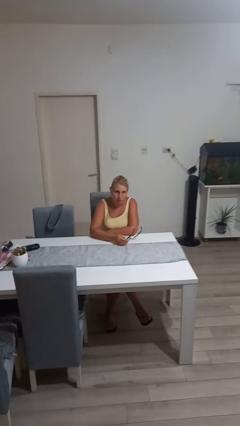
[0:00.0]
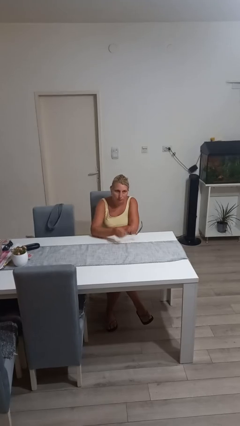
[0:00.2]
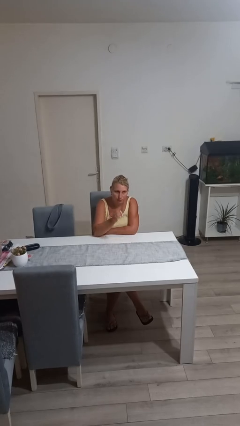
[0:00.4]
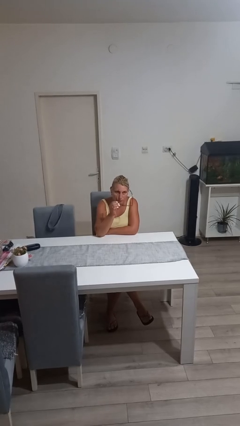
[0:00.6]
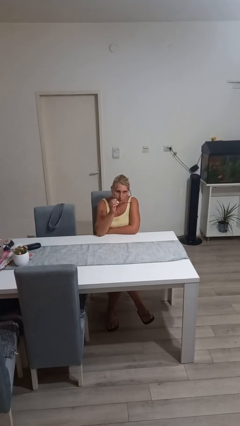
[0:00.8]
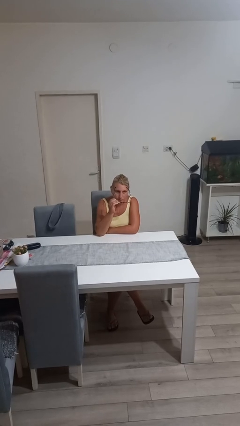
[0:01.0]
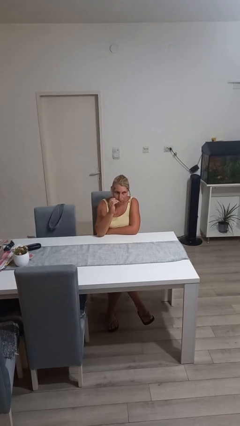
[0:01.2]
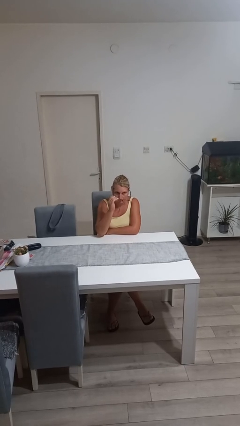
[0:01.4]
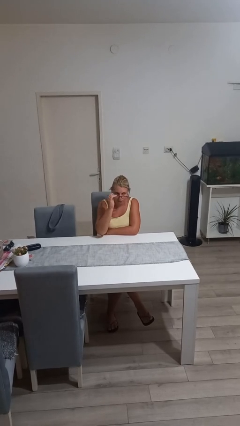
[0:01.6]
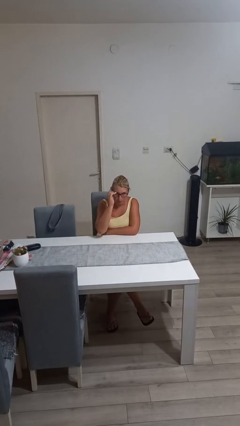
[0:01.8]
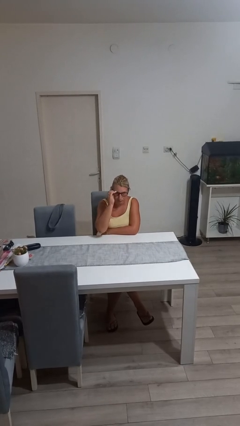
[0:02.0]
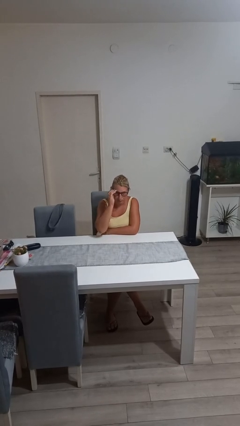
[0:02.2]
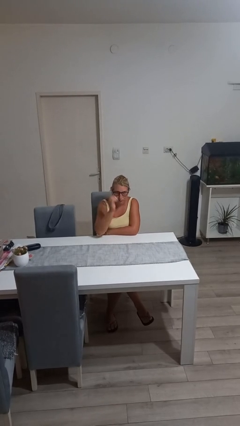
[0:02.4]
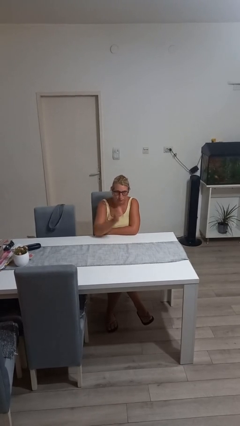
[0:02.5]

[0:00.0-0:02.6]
person puts on glasses

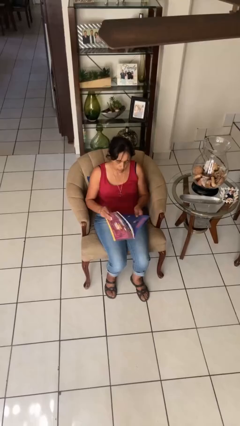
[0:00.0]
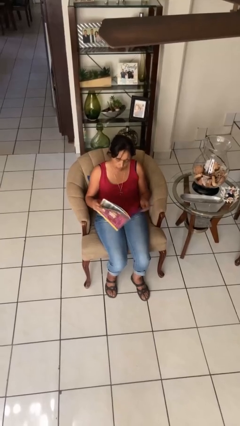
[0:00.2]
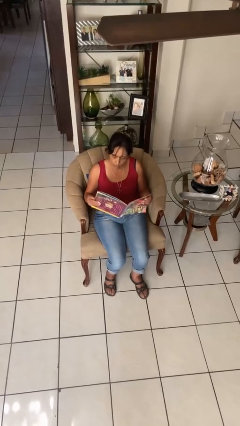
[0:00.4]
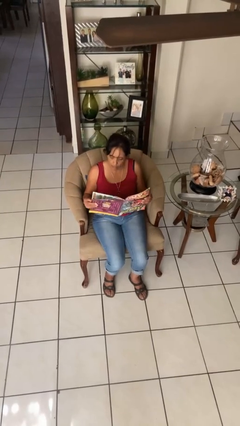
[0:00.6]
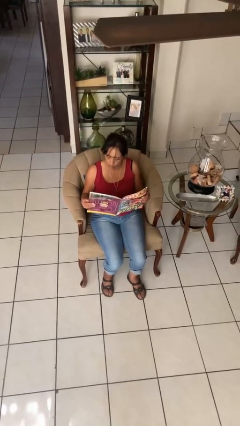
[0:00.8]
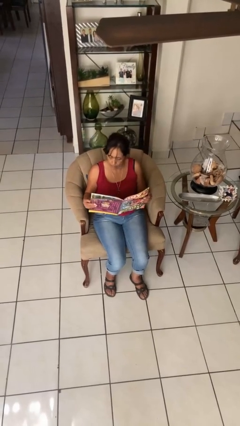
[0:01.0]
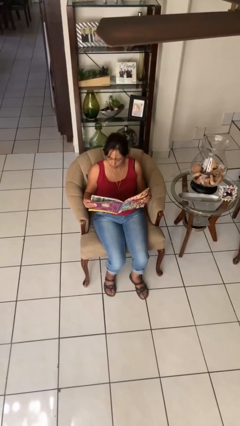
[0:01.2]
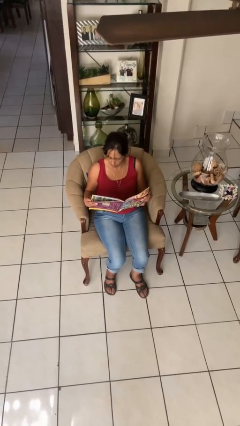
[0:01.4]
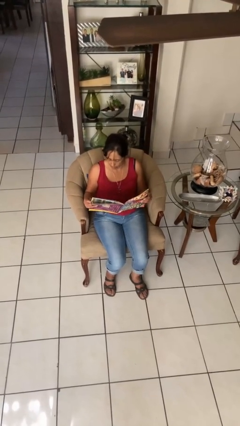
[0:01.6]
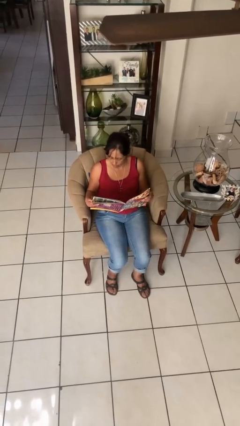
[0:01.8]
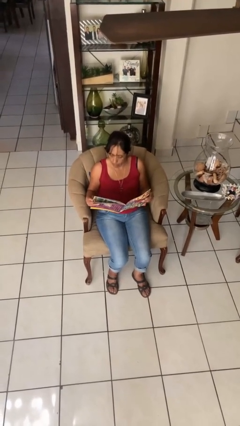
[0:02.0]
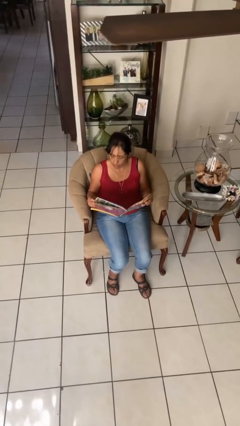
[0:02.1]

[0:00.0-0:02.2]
person reads magazine

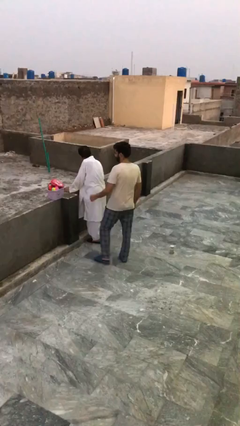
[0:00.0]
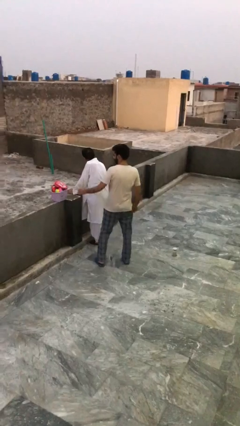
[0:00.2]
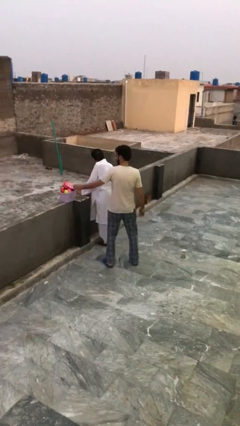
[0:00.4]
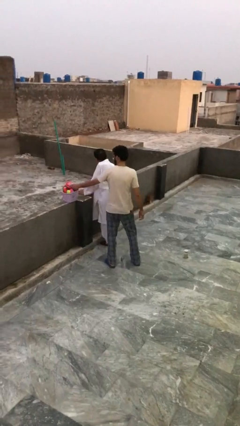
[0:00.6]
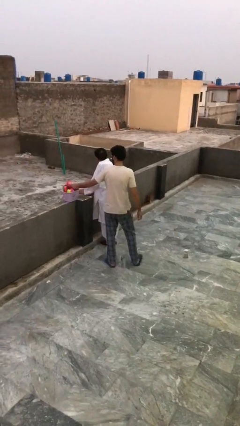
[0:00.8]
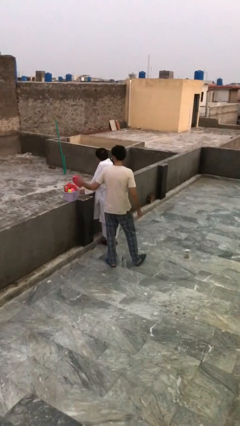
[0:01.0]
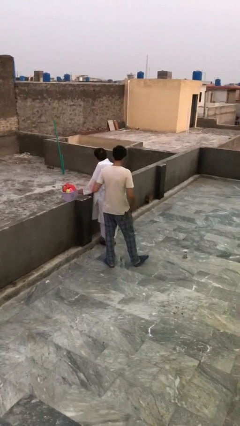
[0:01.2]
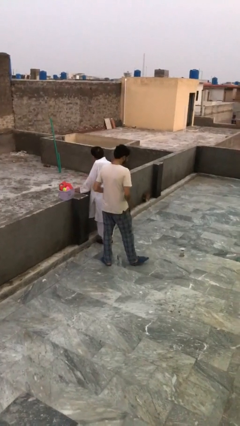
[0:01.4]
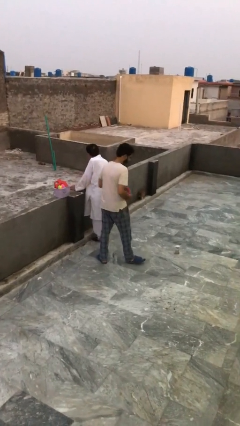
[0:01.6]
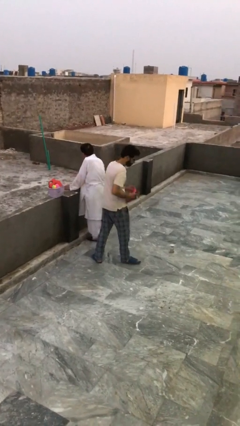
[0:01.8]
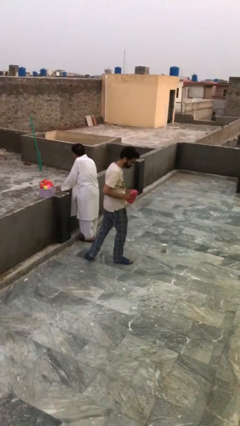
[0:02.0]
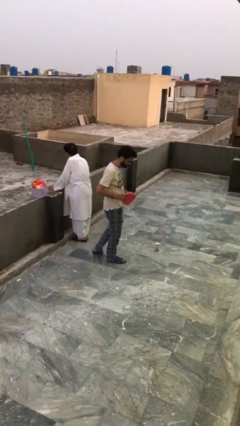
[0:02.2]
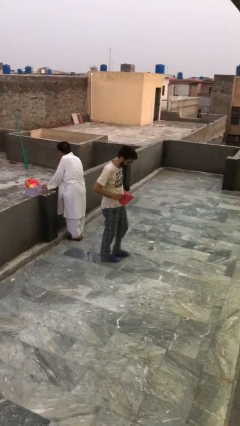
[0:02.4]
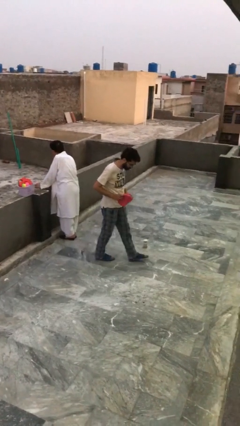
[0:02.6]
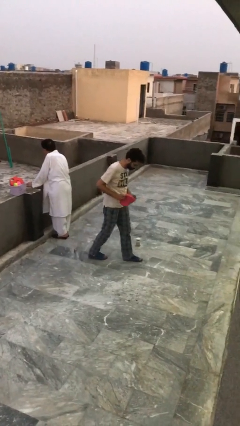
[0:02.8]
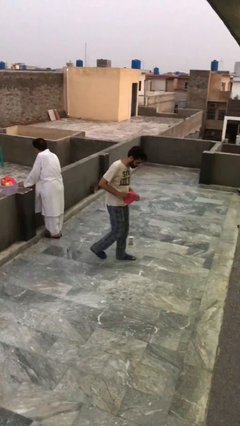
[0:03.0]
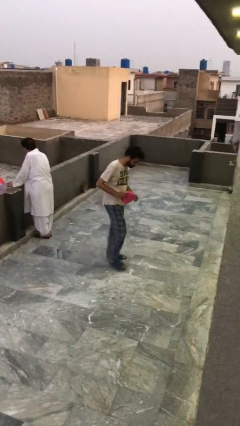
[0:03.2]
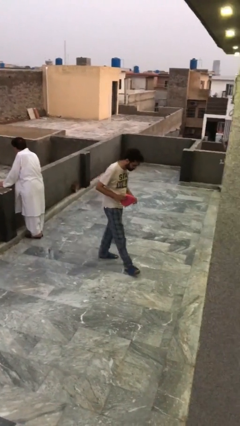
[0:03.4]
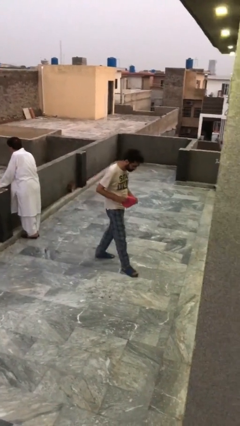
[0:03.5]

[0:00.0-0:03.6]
person steals object from person

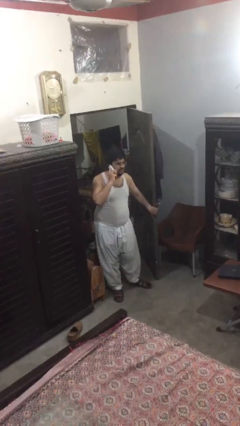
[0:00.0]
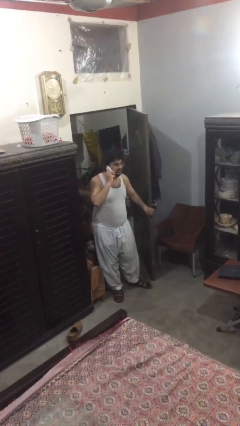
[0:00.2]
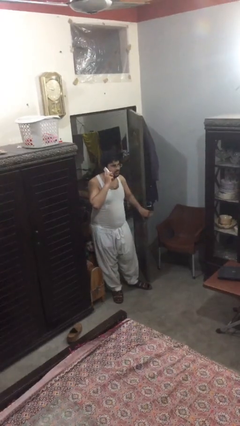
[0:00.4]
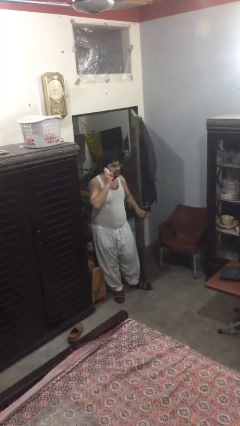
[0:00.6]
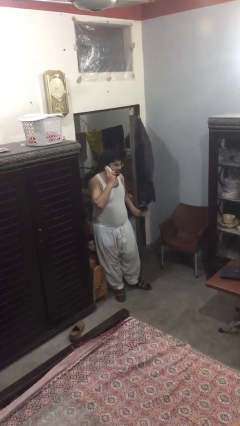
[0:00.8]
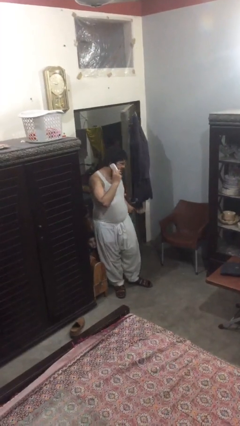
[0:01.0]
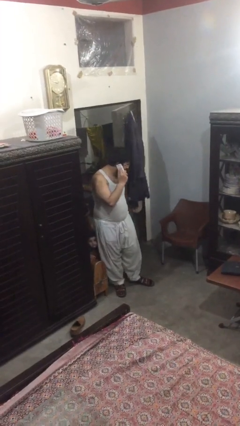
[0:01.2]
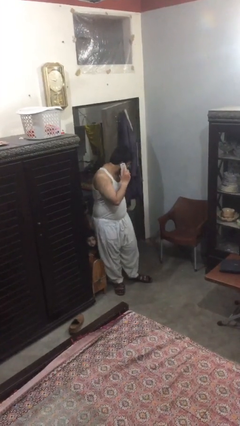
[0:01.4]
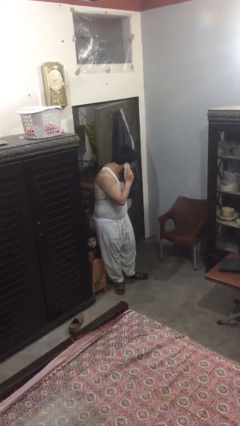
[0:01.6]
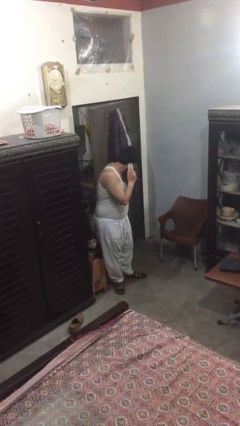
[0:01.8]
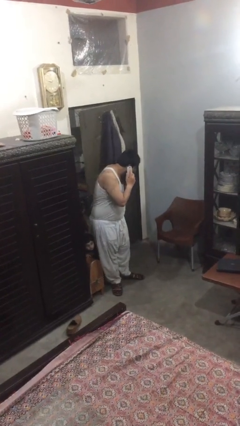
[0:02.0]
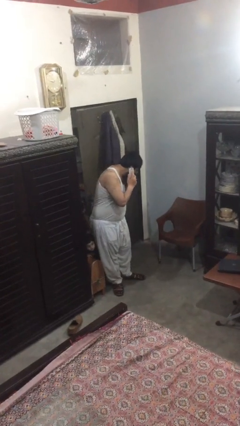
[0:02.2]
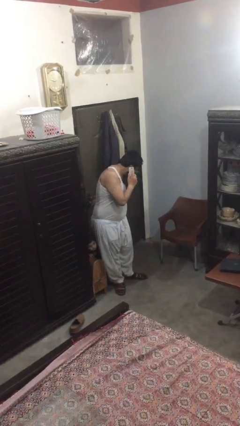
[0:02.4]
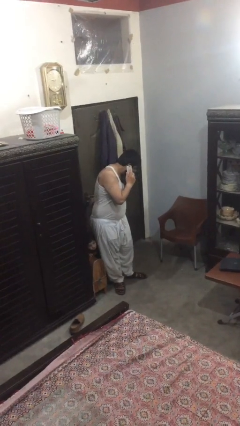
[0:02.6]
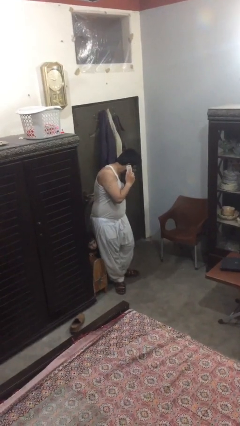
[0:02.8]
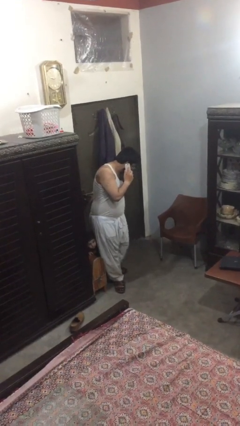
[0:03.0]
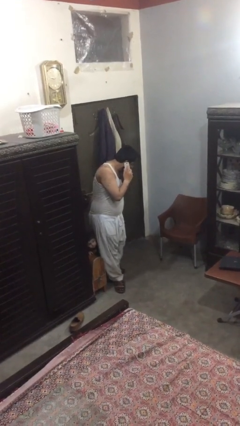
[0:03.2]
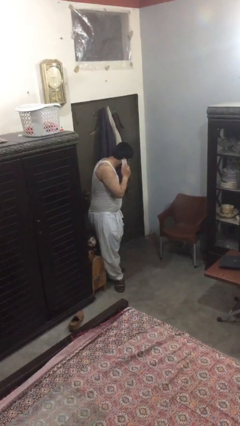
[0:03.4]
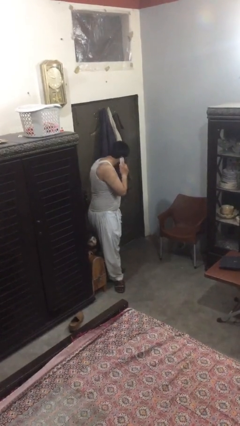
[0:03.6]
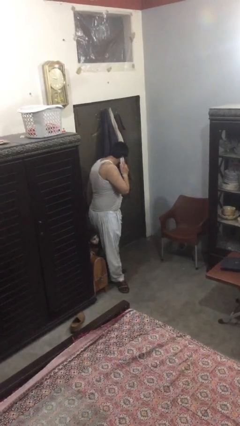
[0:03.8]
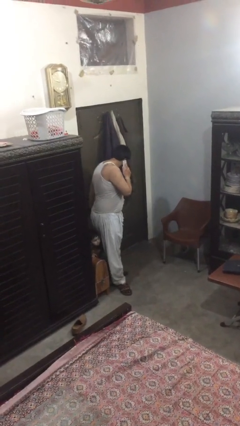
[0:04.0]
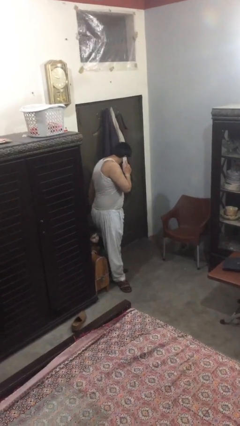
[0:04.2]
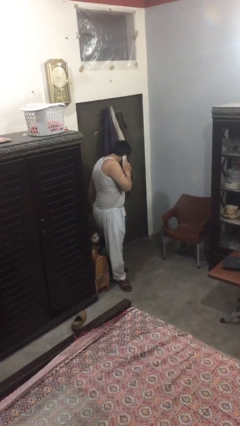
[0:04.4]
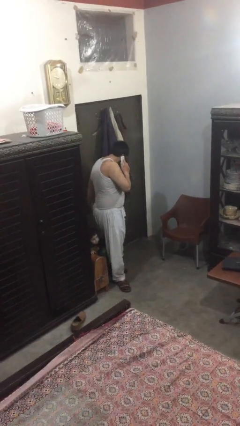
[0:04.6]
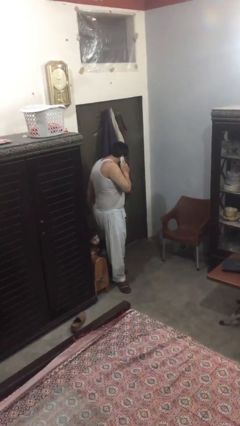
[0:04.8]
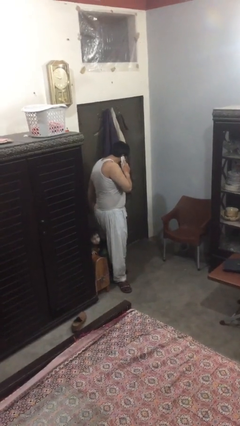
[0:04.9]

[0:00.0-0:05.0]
person closes facility door

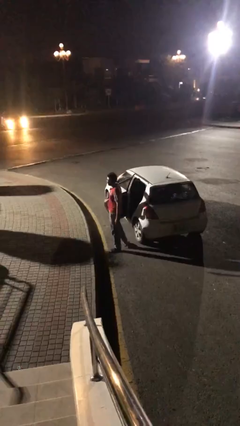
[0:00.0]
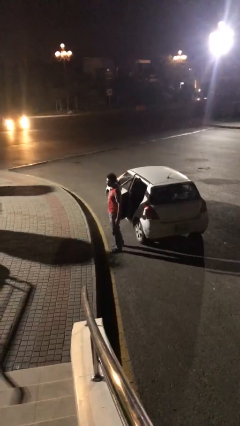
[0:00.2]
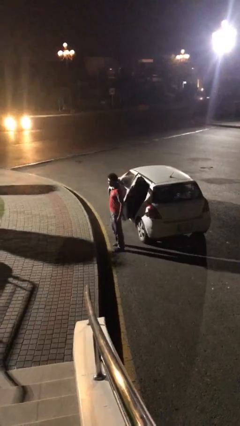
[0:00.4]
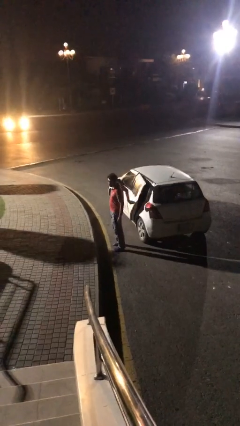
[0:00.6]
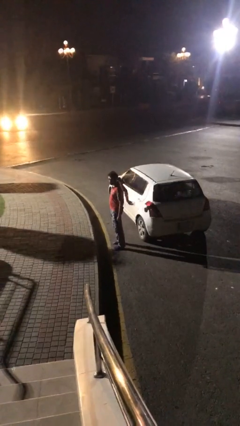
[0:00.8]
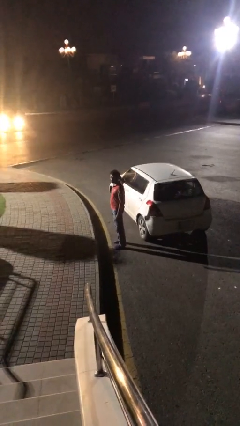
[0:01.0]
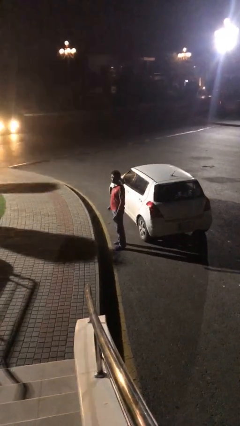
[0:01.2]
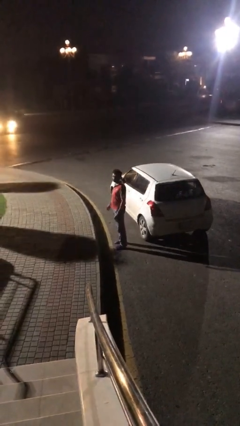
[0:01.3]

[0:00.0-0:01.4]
person closes car door

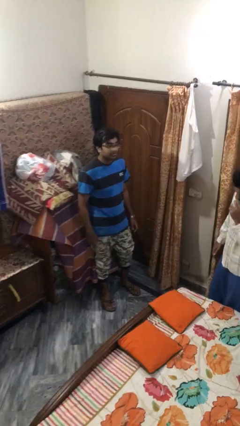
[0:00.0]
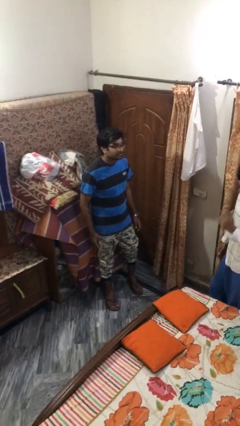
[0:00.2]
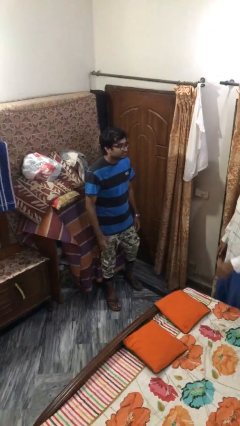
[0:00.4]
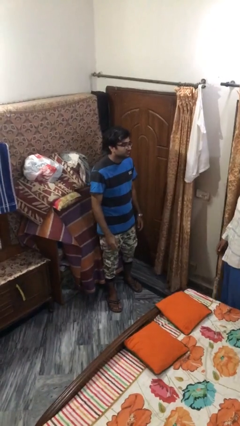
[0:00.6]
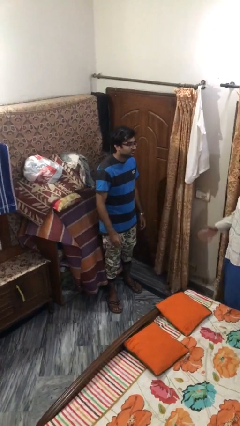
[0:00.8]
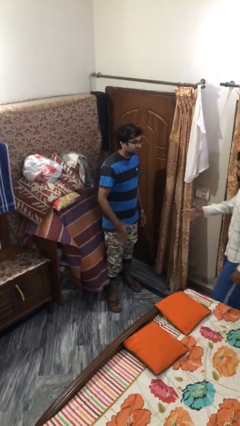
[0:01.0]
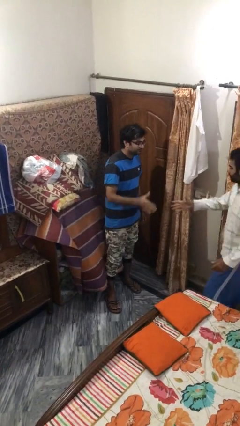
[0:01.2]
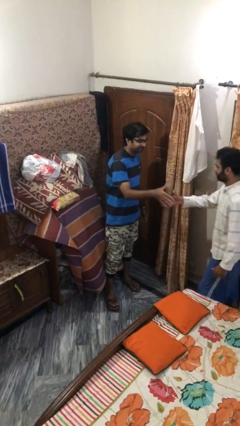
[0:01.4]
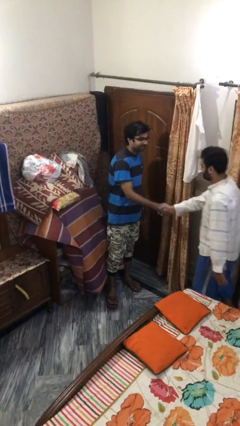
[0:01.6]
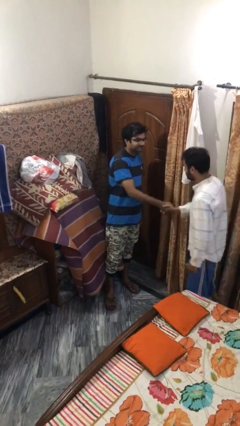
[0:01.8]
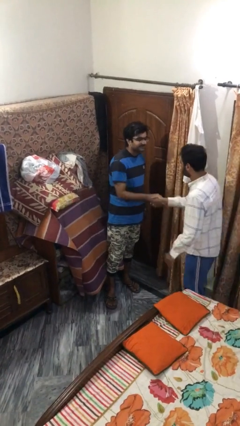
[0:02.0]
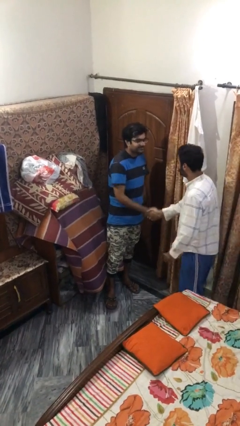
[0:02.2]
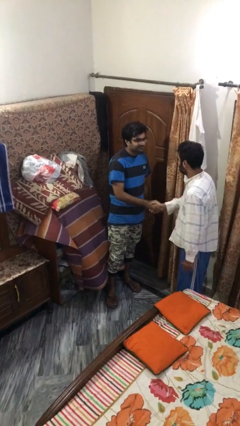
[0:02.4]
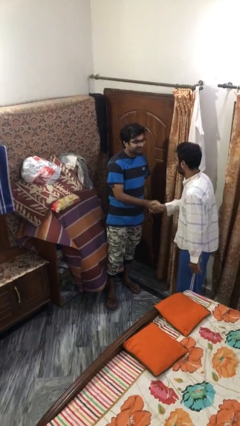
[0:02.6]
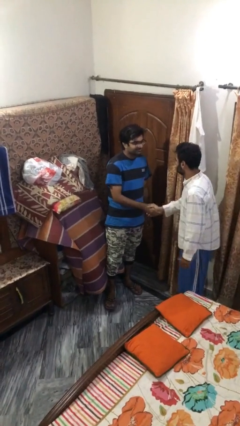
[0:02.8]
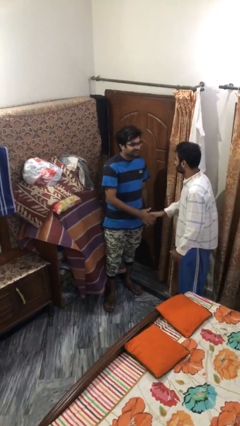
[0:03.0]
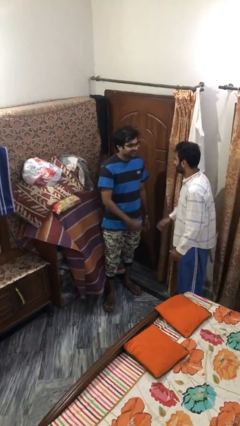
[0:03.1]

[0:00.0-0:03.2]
person shakes hand
